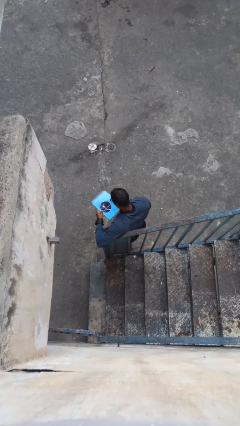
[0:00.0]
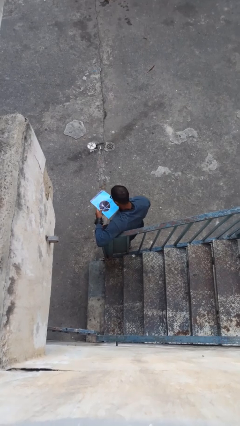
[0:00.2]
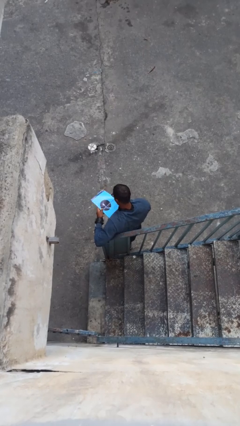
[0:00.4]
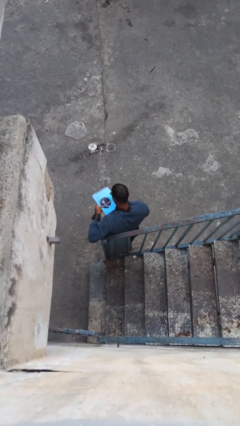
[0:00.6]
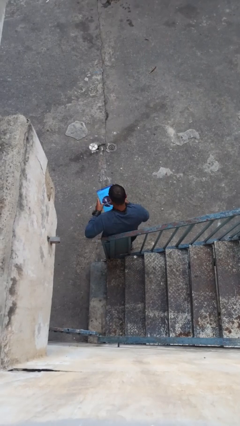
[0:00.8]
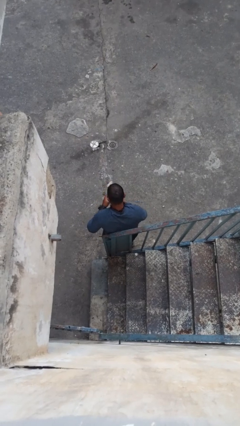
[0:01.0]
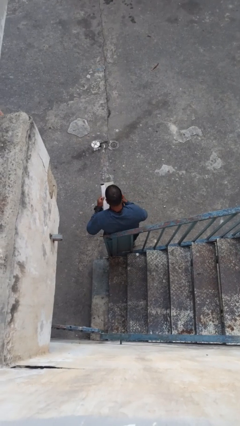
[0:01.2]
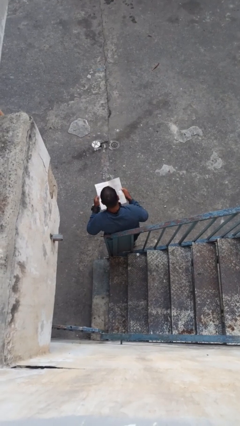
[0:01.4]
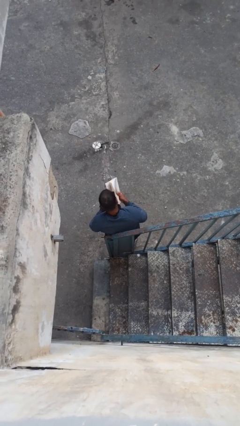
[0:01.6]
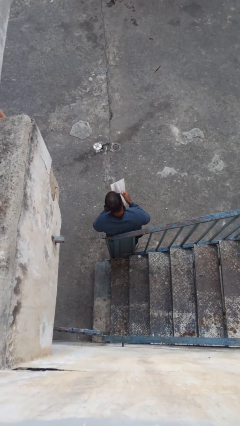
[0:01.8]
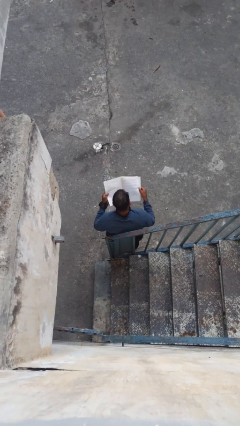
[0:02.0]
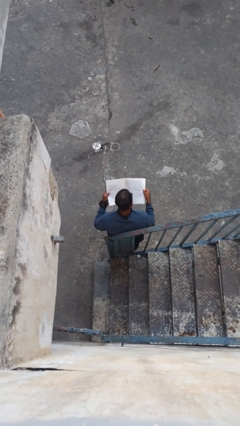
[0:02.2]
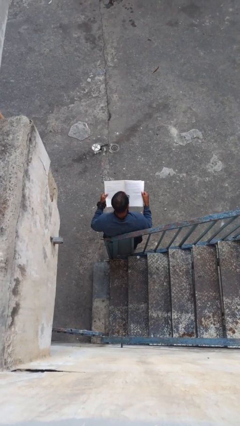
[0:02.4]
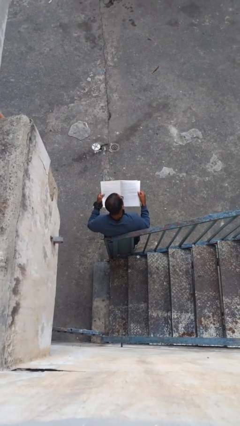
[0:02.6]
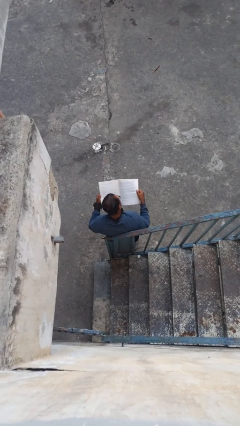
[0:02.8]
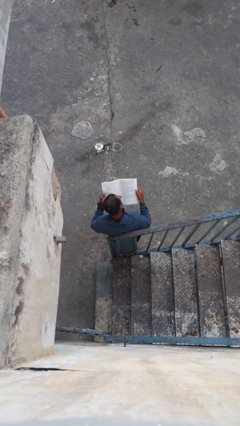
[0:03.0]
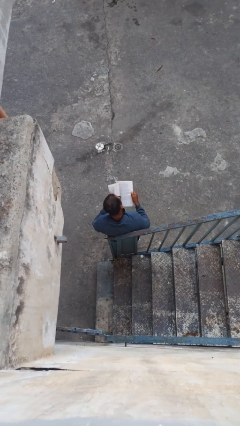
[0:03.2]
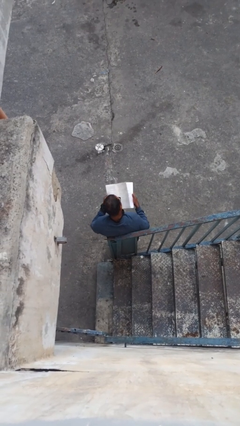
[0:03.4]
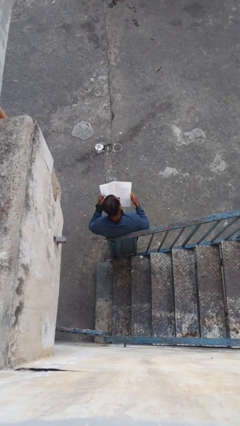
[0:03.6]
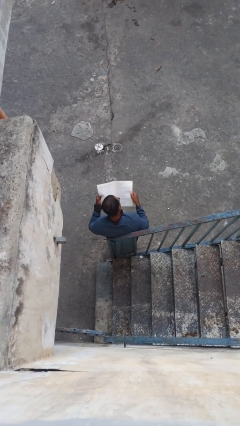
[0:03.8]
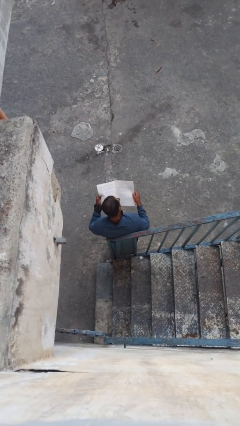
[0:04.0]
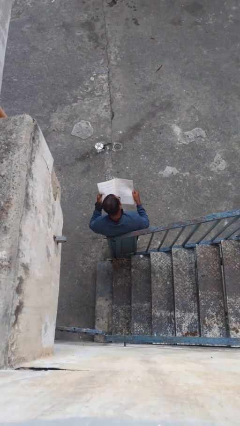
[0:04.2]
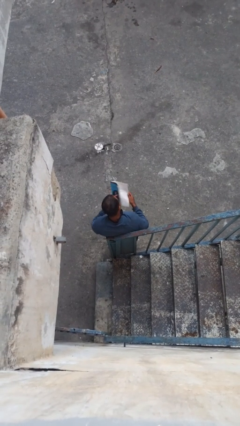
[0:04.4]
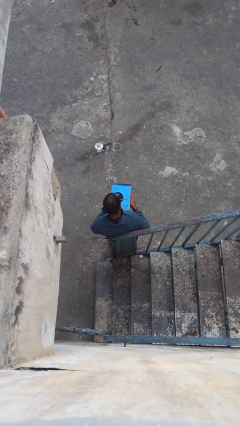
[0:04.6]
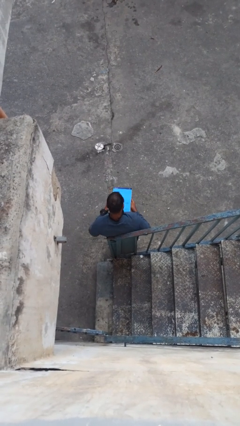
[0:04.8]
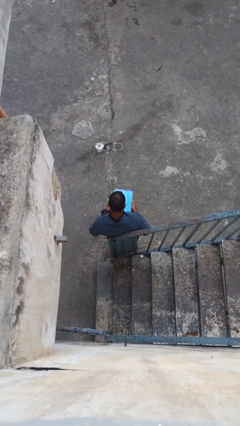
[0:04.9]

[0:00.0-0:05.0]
person reads document

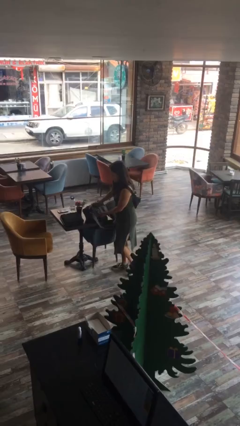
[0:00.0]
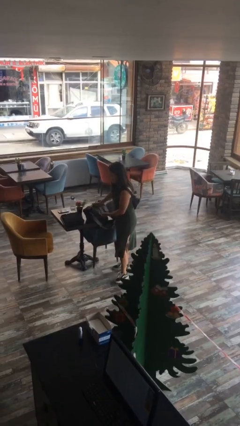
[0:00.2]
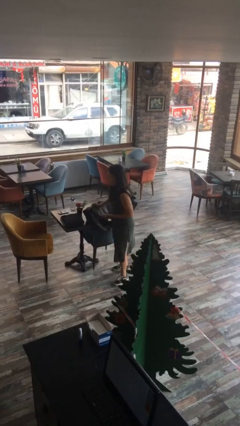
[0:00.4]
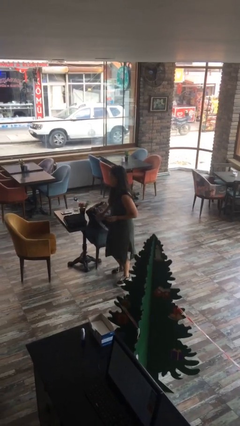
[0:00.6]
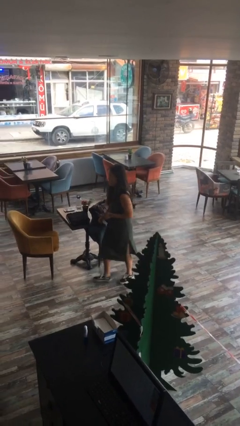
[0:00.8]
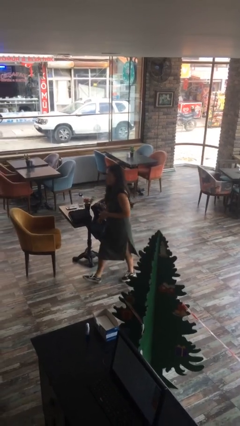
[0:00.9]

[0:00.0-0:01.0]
person puts down object on table

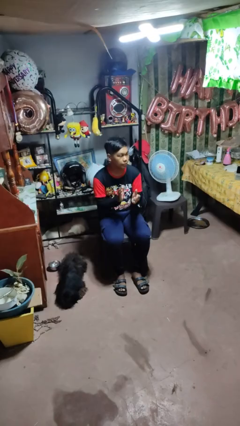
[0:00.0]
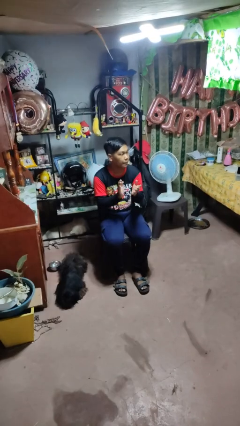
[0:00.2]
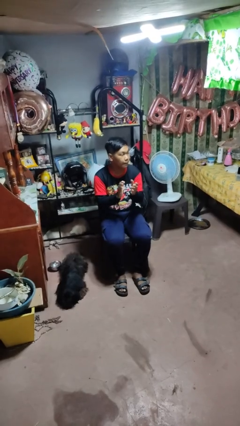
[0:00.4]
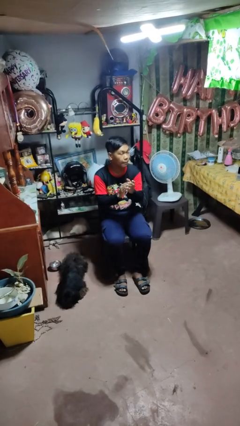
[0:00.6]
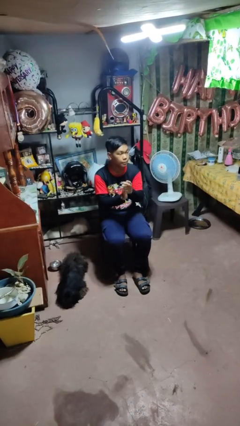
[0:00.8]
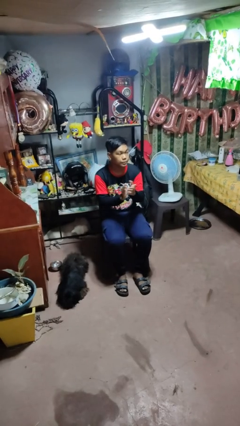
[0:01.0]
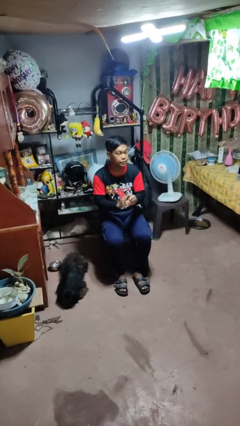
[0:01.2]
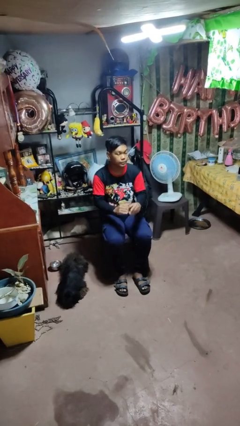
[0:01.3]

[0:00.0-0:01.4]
person claps hands

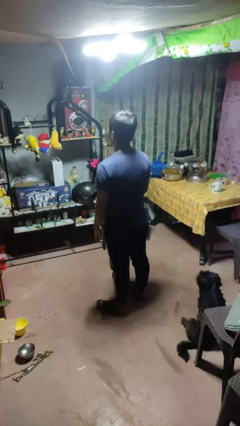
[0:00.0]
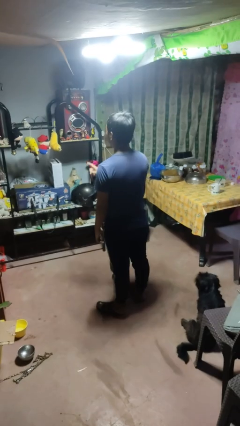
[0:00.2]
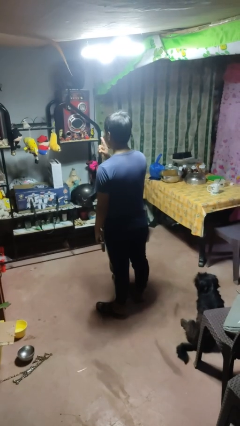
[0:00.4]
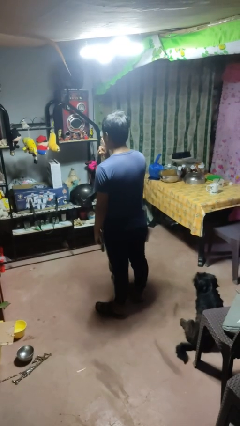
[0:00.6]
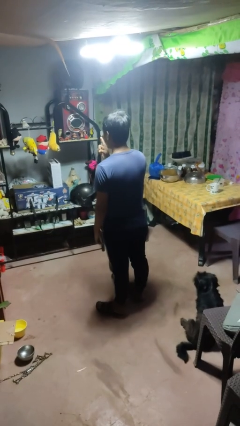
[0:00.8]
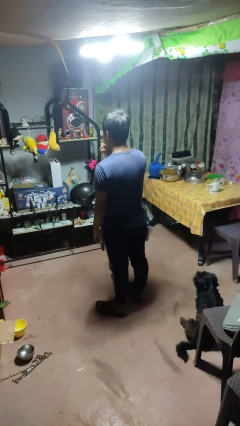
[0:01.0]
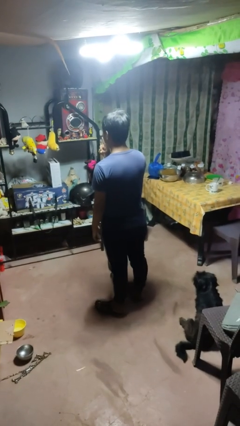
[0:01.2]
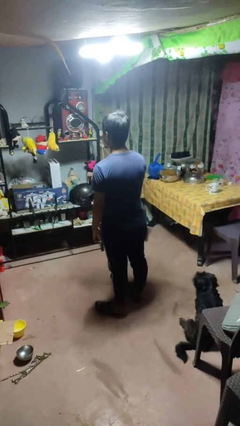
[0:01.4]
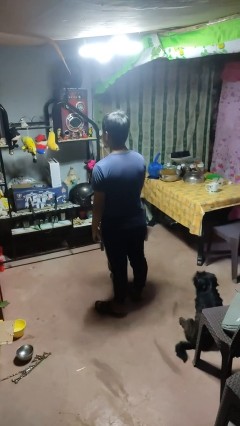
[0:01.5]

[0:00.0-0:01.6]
person gestures be quiet

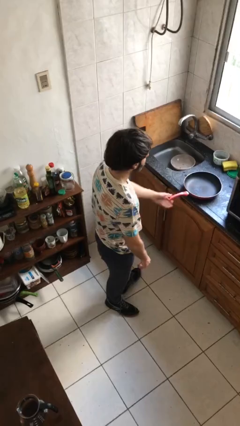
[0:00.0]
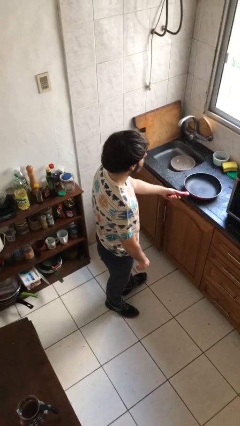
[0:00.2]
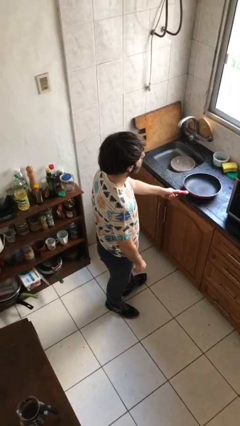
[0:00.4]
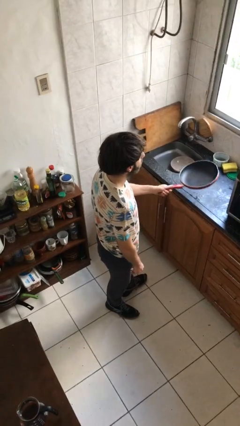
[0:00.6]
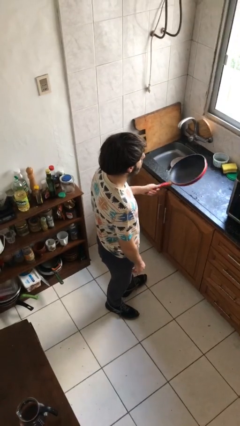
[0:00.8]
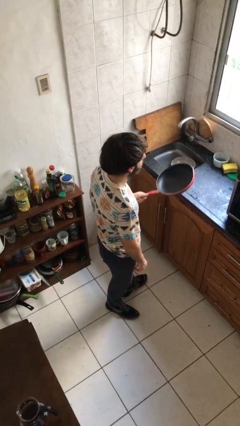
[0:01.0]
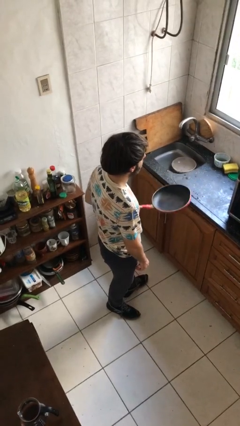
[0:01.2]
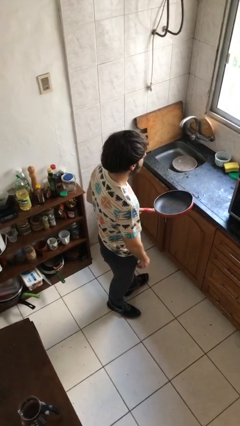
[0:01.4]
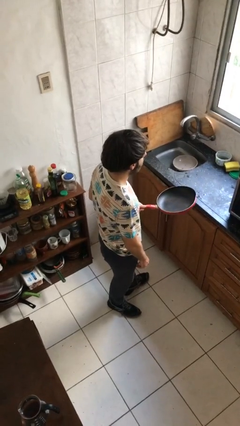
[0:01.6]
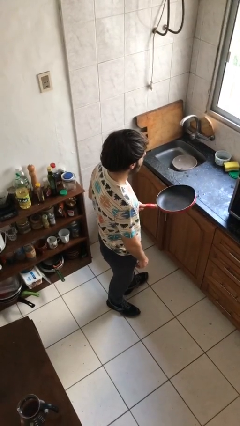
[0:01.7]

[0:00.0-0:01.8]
person picks up object from countertop

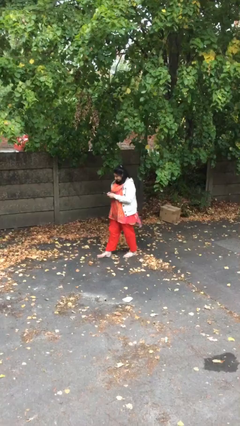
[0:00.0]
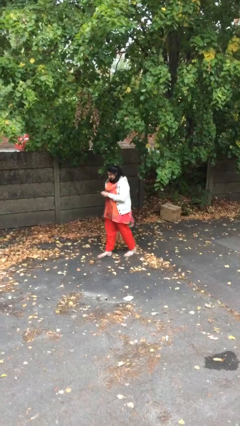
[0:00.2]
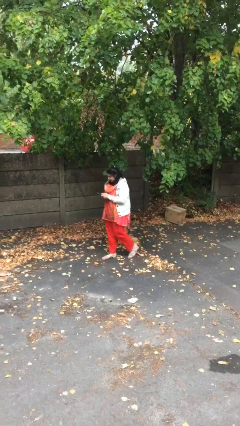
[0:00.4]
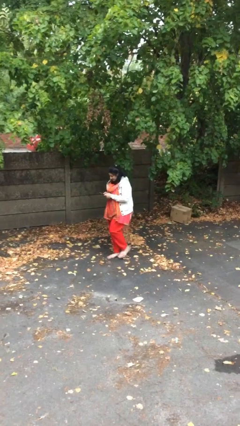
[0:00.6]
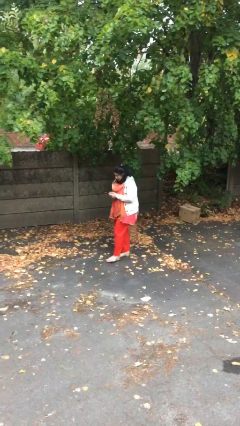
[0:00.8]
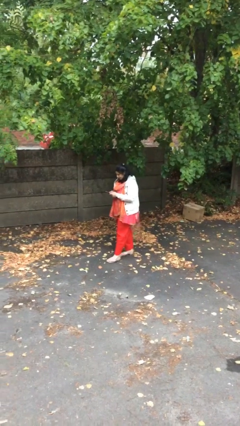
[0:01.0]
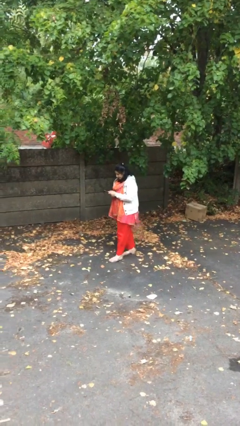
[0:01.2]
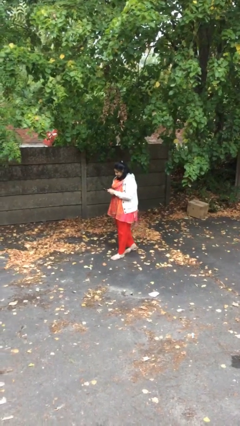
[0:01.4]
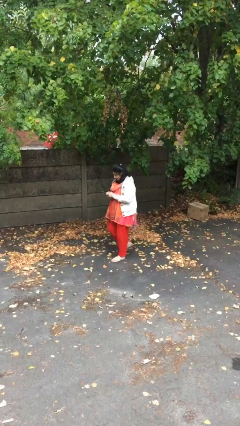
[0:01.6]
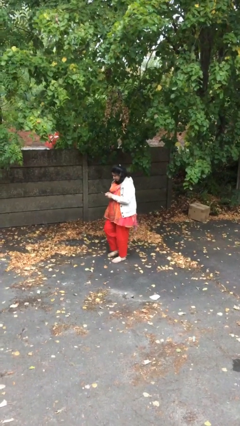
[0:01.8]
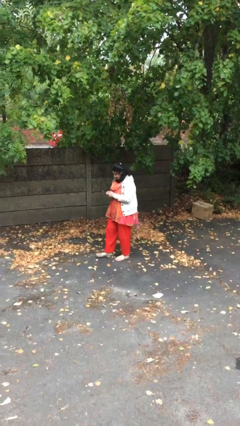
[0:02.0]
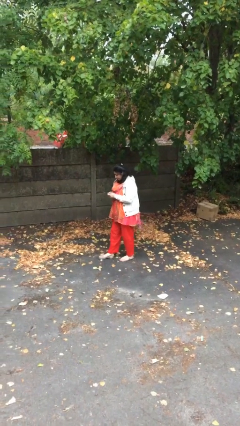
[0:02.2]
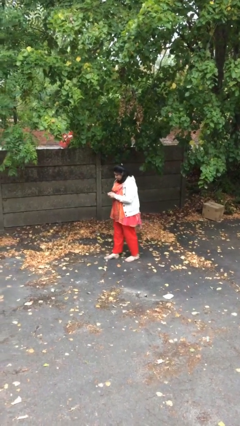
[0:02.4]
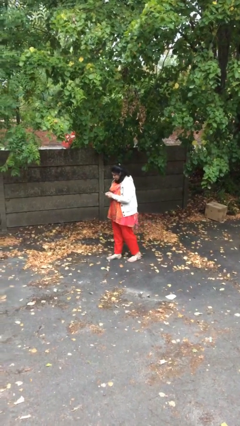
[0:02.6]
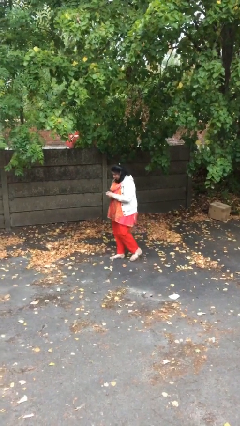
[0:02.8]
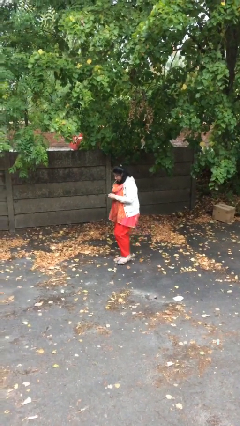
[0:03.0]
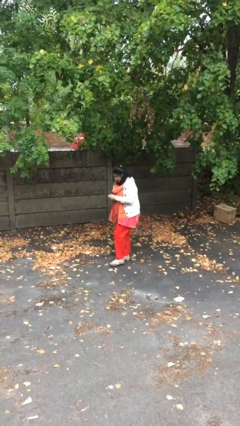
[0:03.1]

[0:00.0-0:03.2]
person texts on phone

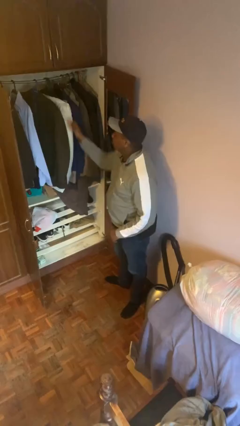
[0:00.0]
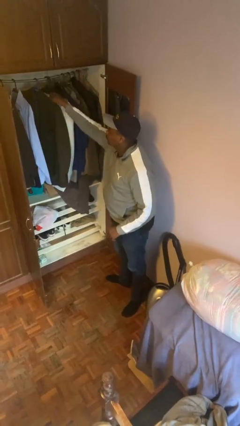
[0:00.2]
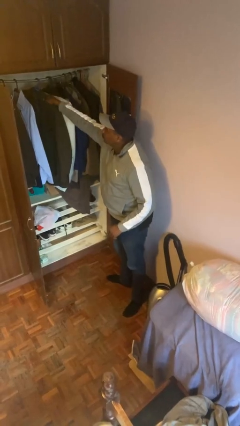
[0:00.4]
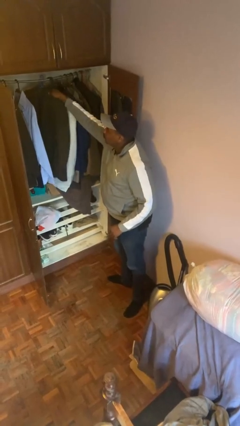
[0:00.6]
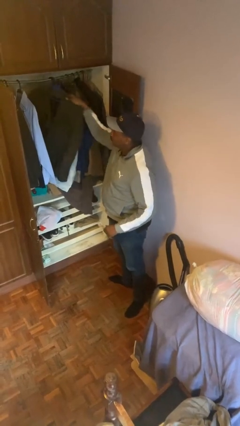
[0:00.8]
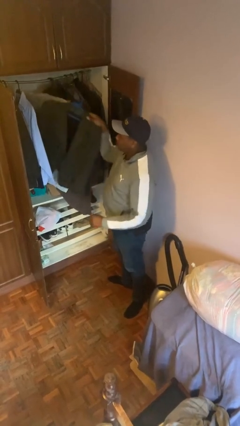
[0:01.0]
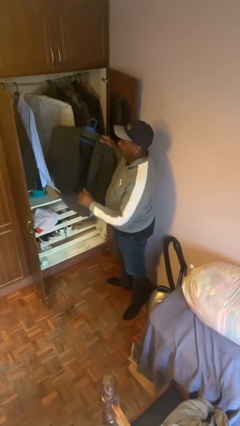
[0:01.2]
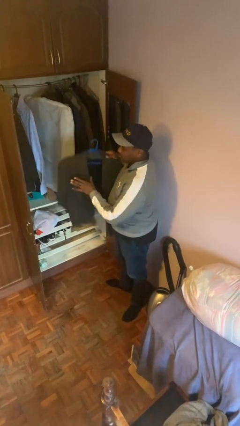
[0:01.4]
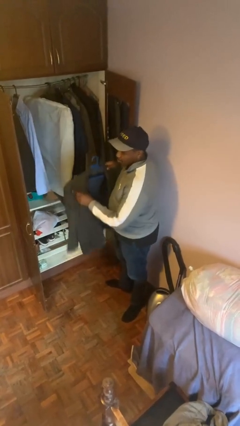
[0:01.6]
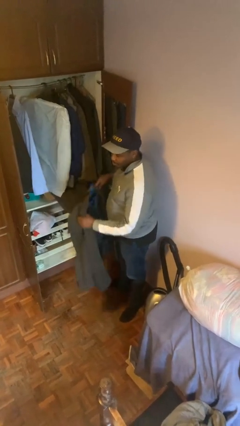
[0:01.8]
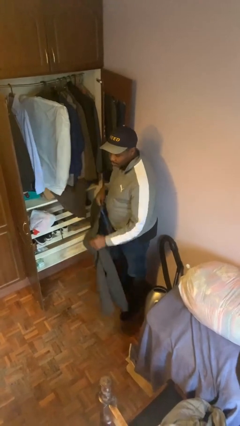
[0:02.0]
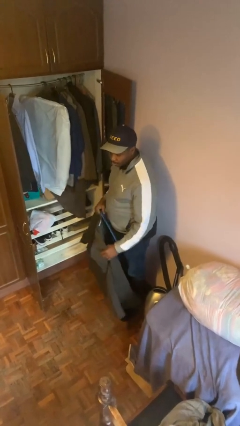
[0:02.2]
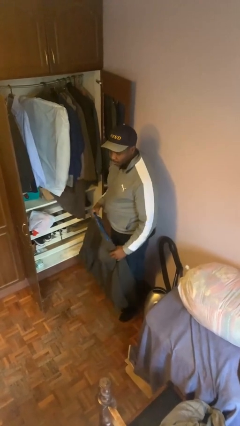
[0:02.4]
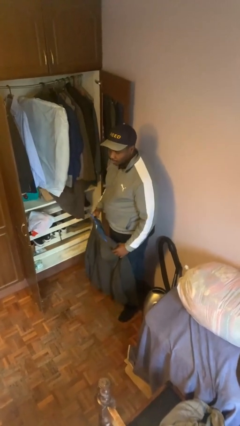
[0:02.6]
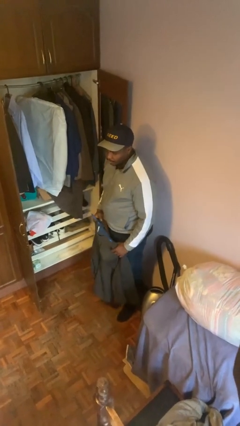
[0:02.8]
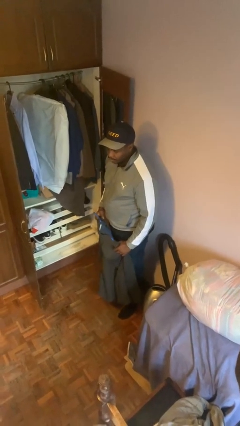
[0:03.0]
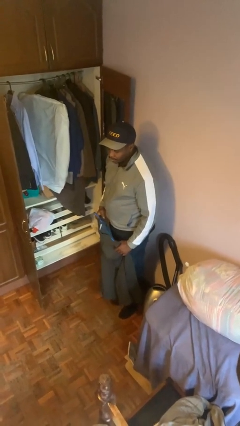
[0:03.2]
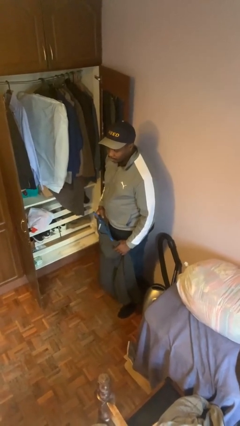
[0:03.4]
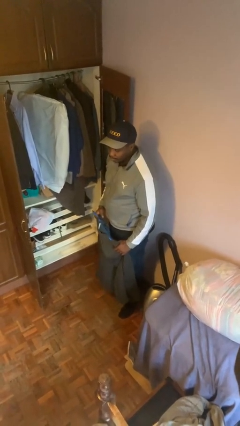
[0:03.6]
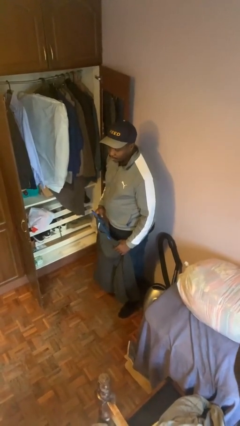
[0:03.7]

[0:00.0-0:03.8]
person takes clothes from closet
